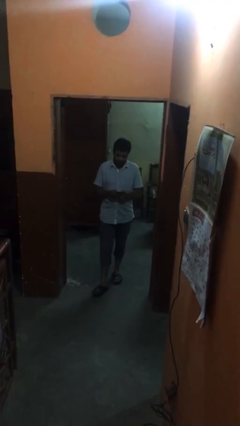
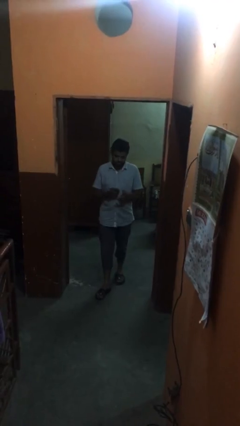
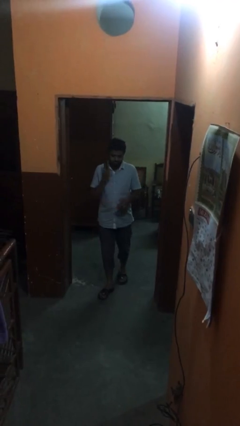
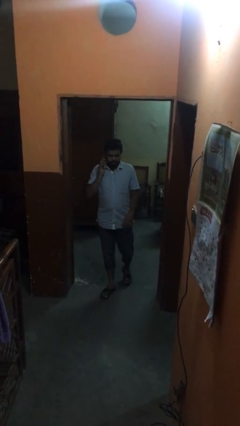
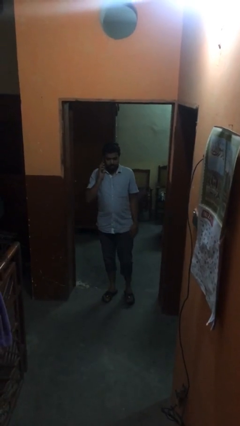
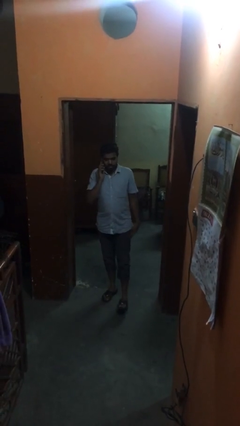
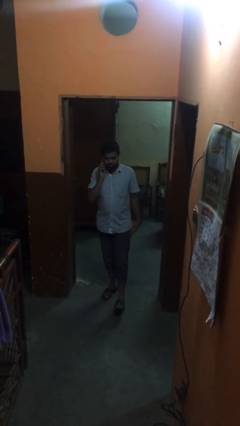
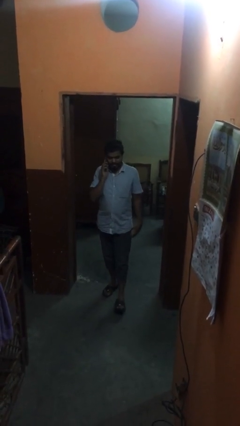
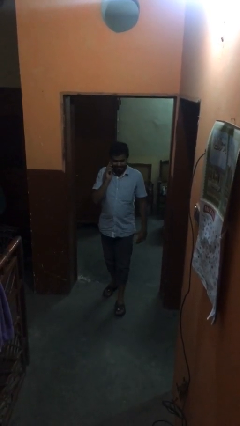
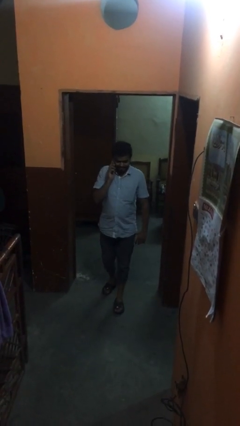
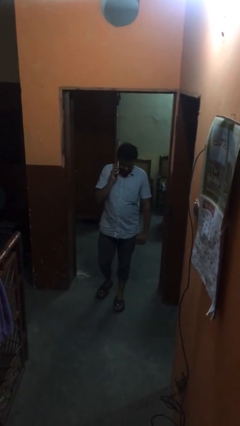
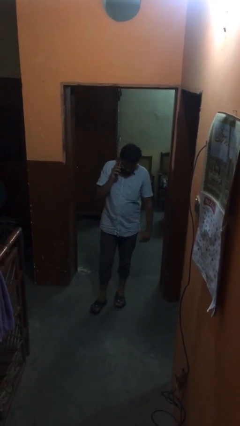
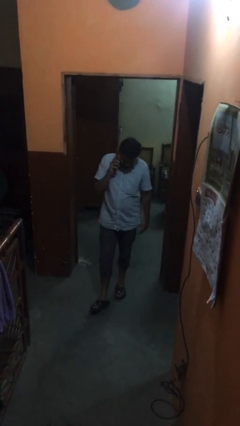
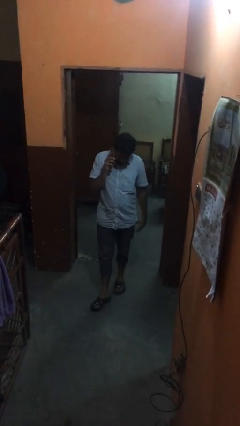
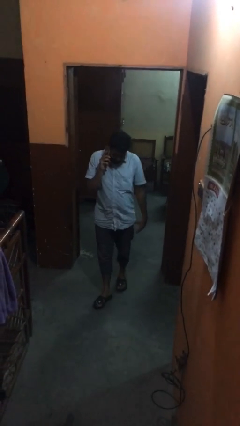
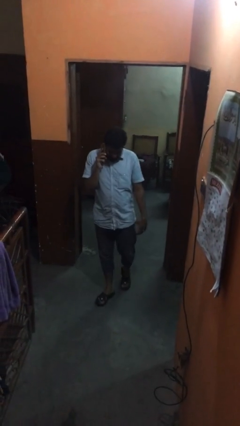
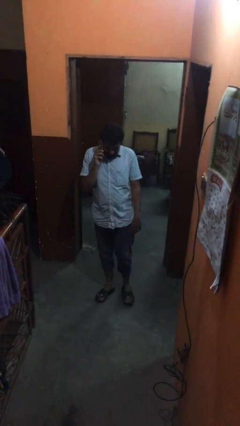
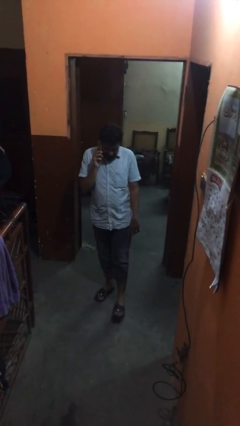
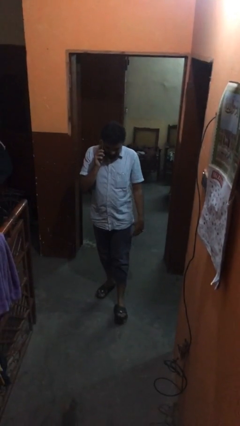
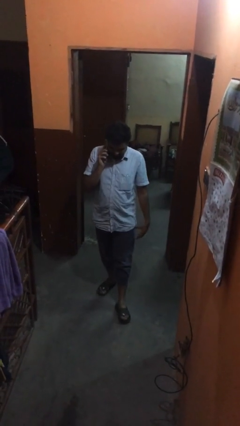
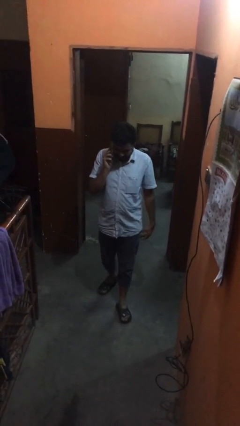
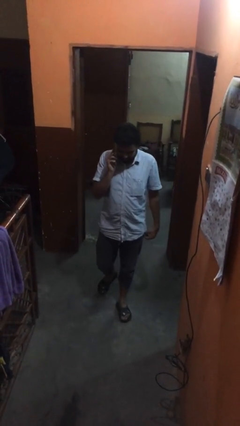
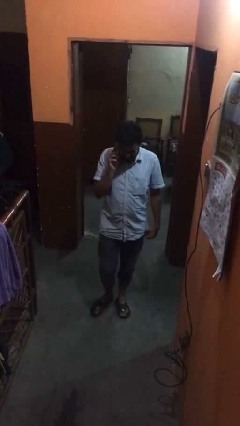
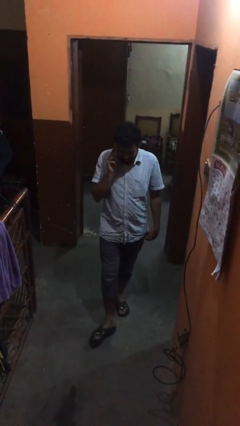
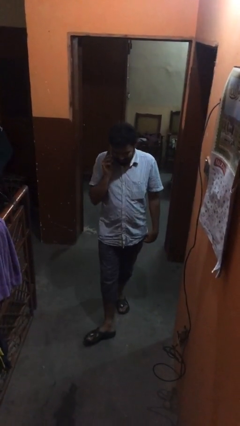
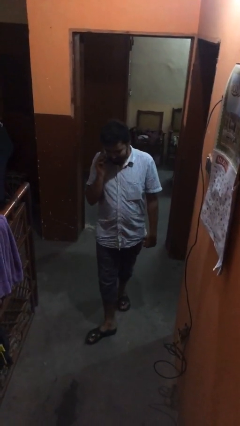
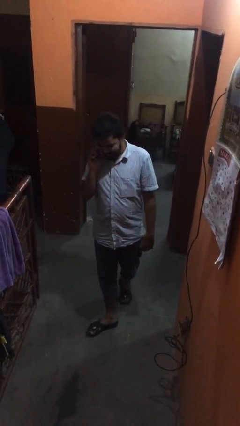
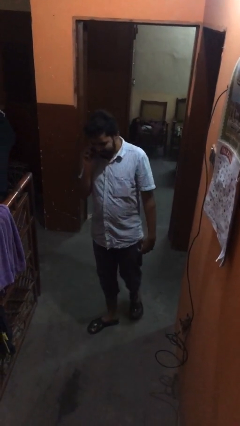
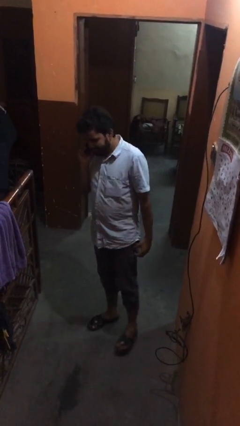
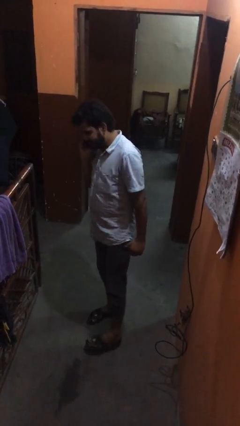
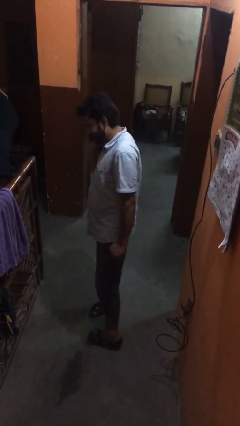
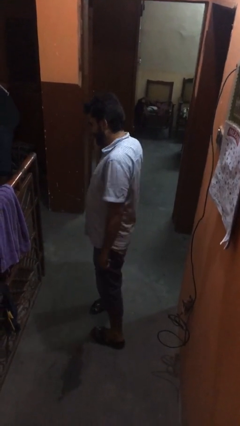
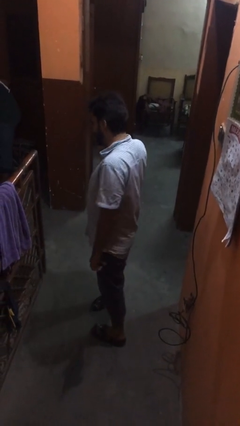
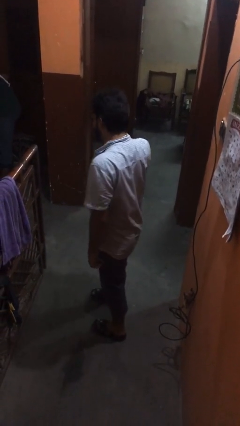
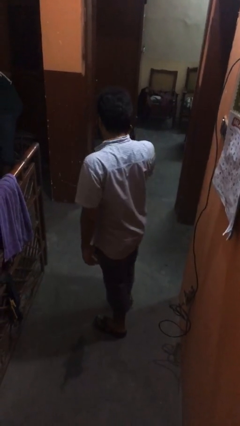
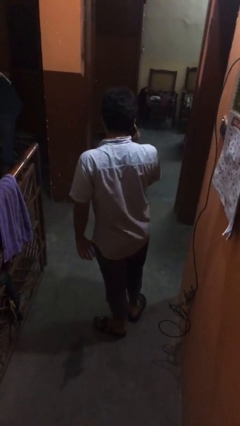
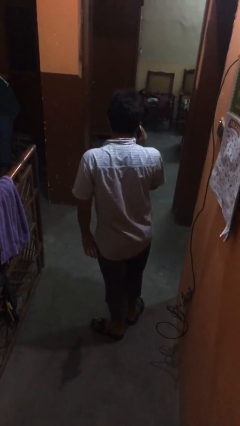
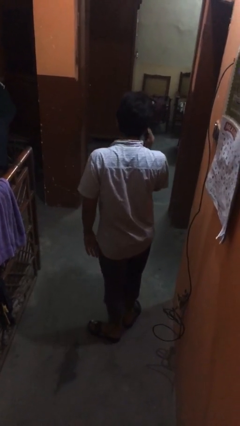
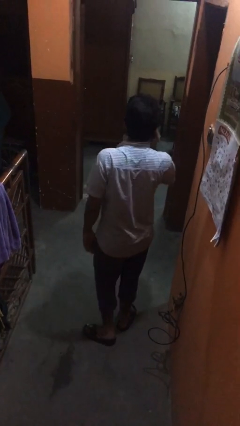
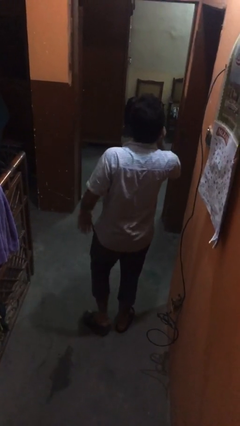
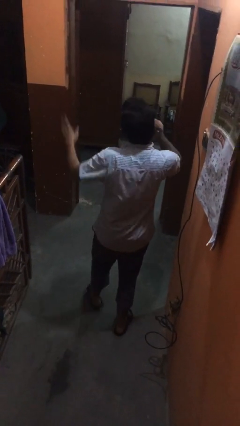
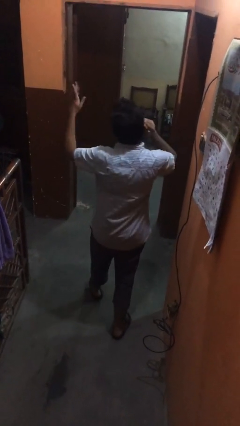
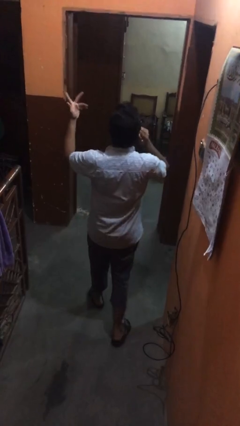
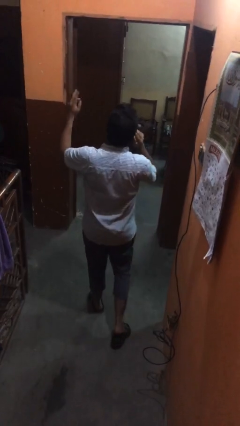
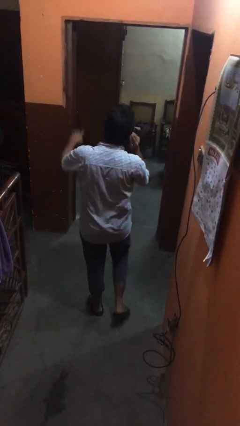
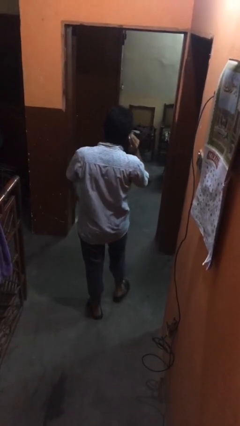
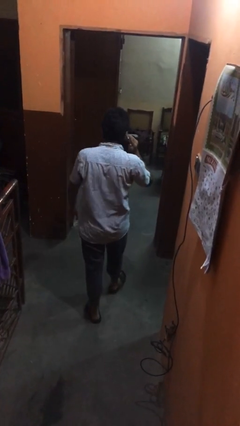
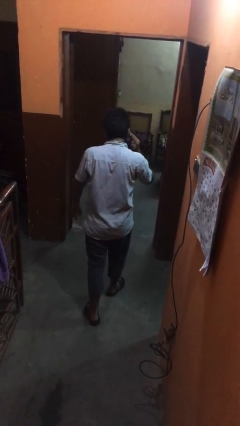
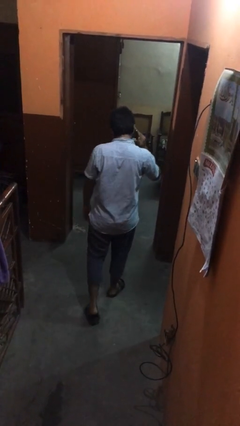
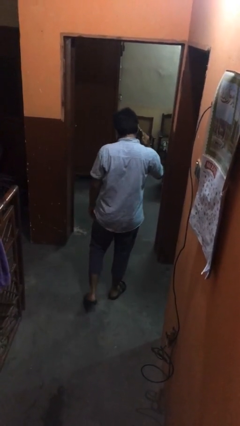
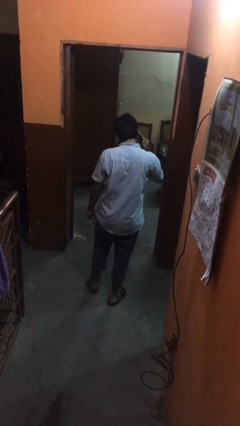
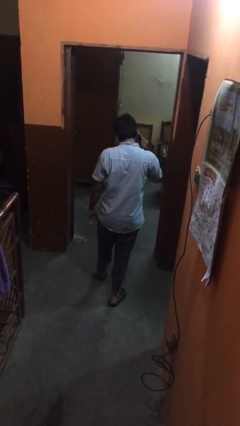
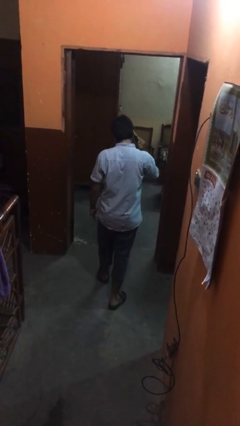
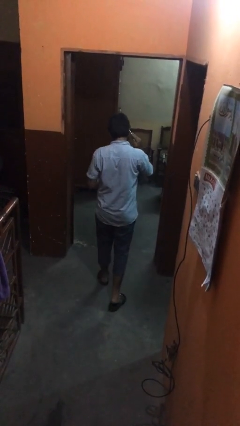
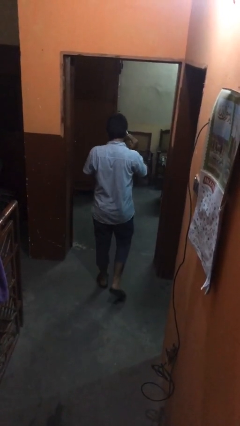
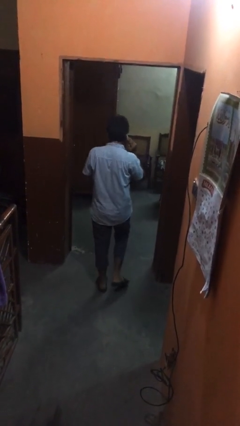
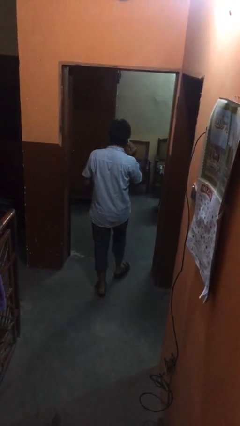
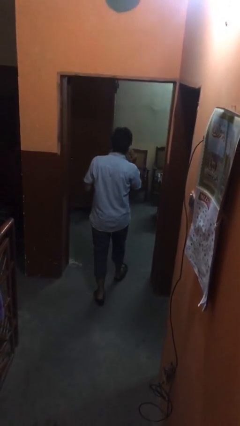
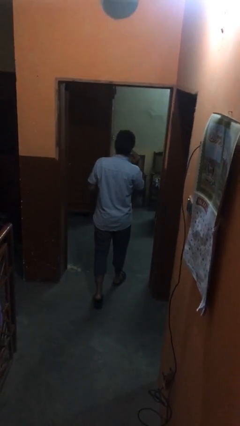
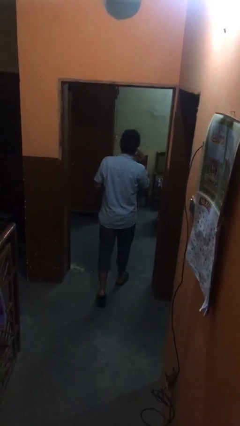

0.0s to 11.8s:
person talks on phone

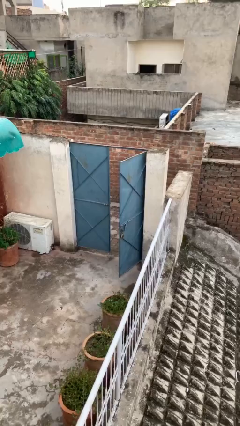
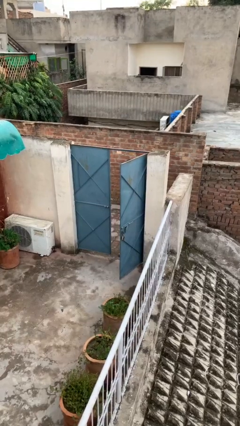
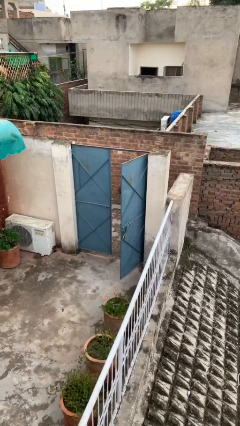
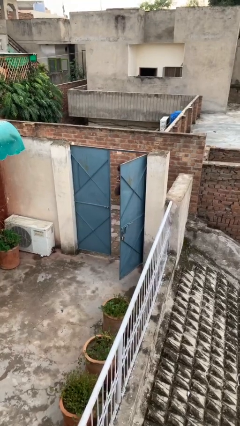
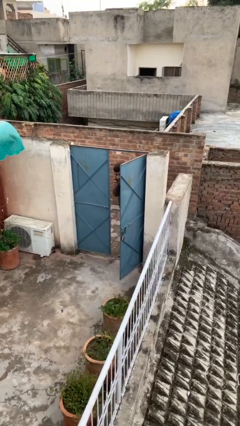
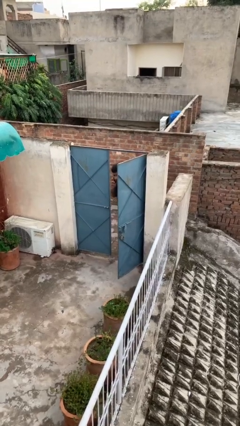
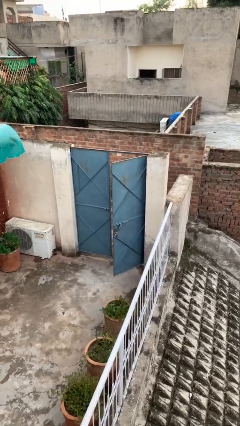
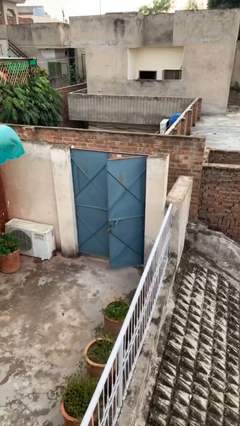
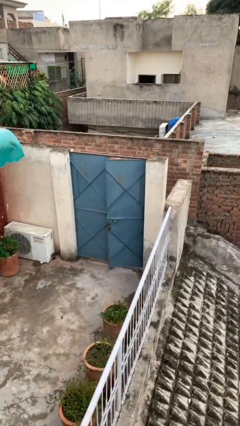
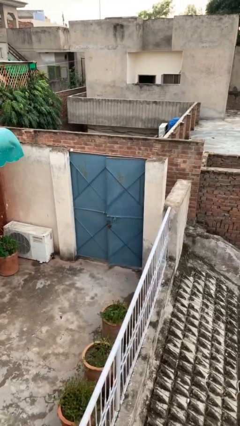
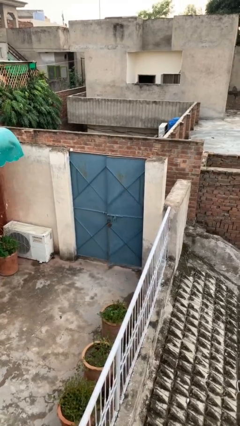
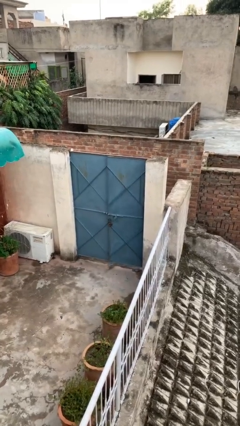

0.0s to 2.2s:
person closes facility door

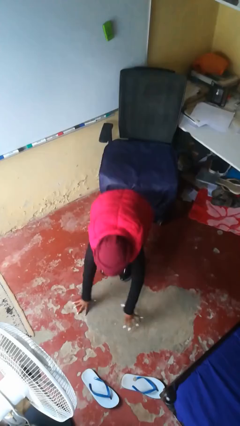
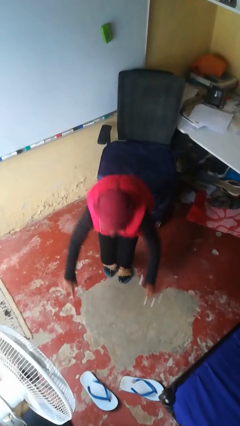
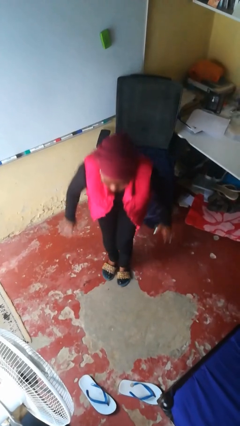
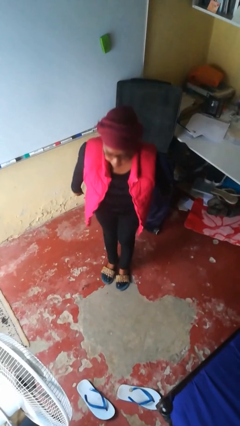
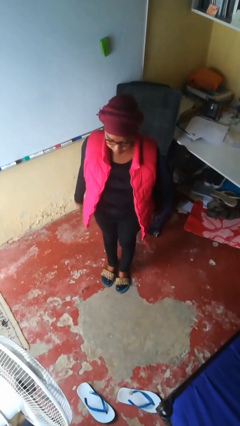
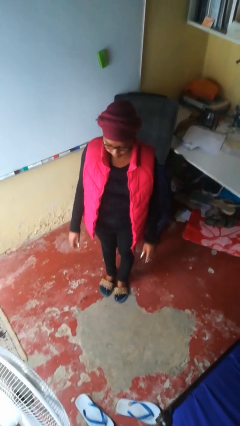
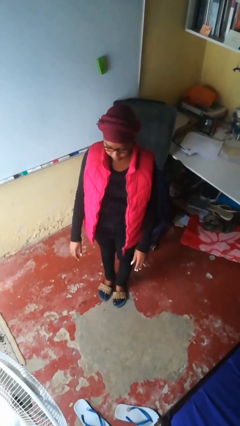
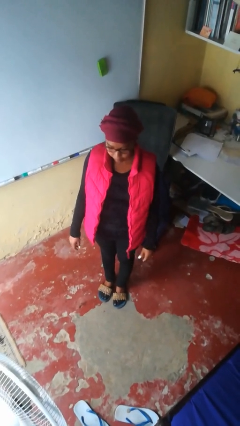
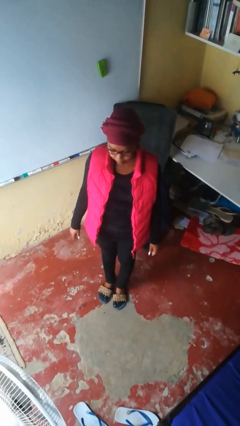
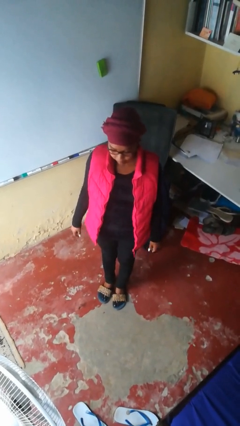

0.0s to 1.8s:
person stands up from floor

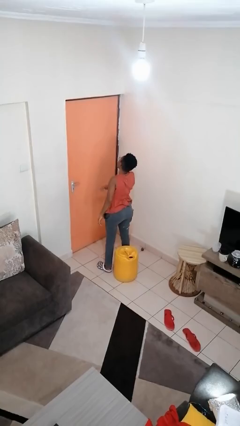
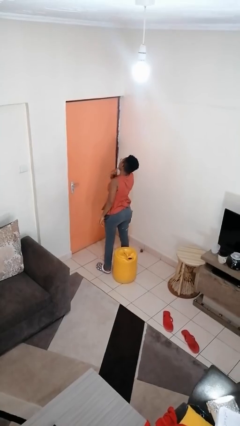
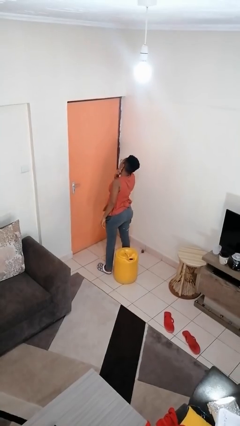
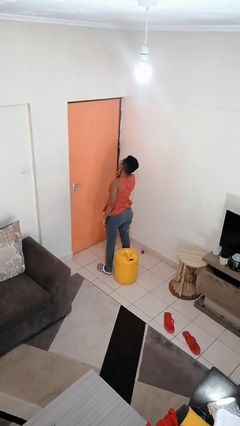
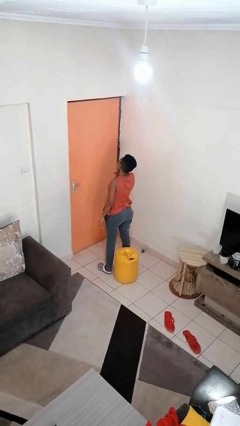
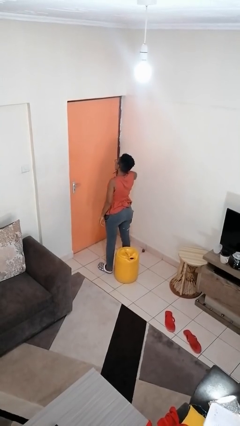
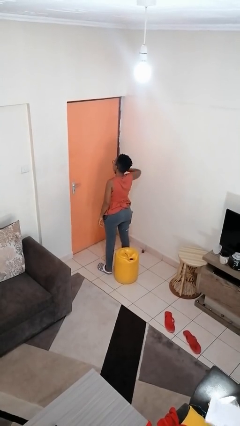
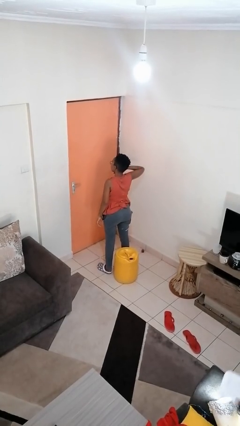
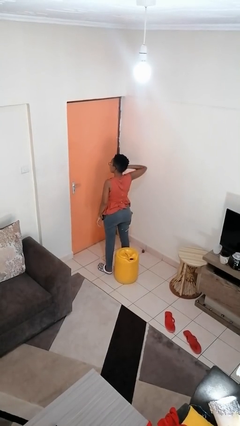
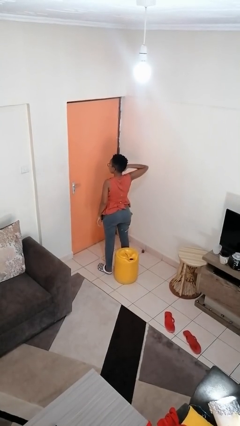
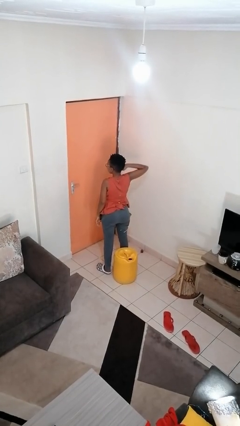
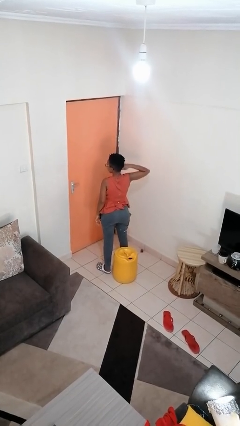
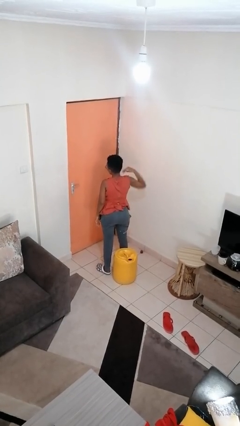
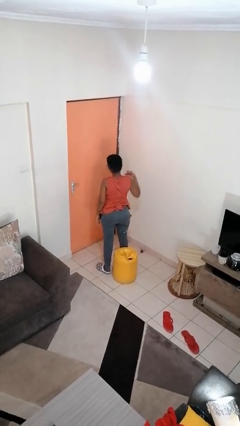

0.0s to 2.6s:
person gestures cut
